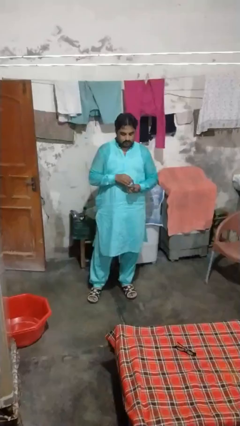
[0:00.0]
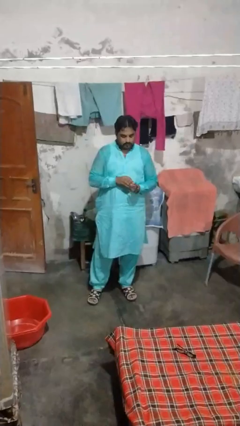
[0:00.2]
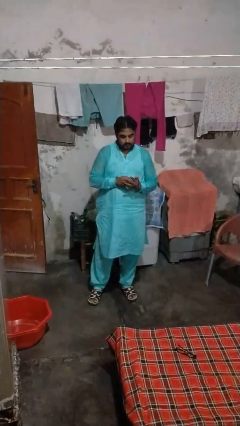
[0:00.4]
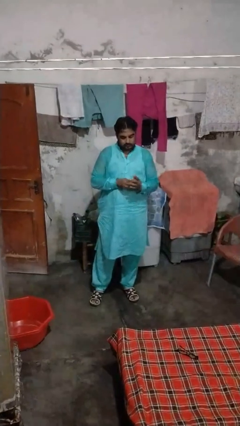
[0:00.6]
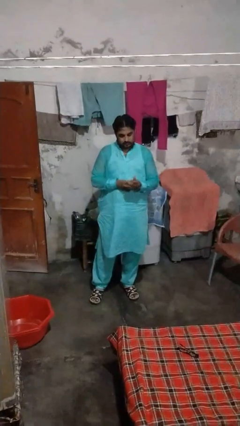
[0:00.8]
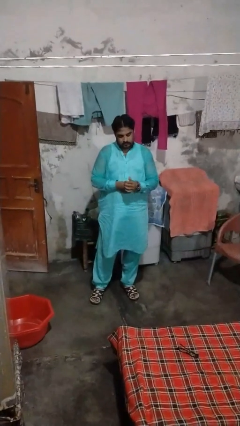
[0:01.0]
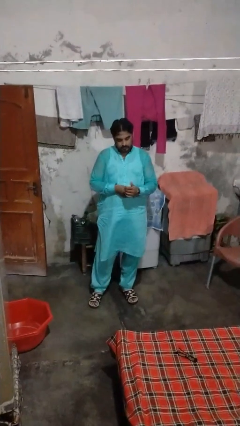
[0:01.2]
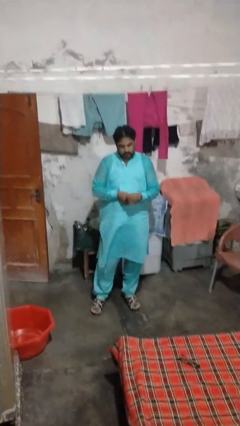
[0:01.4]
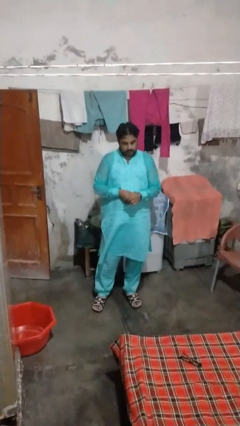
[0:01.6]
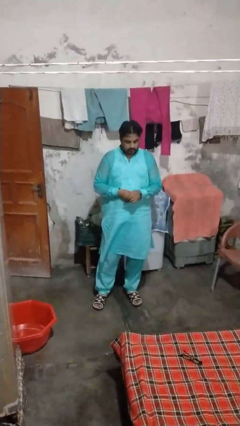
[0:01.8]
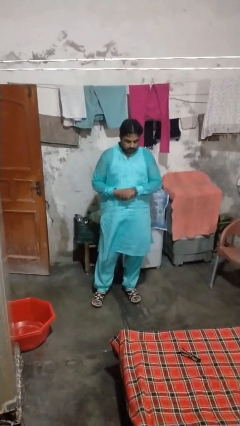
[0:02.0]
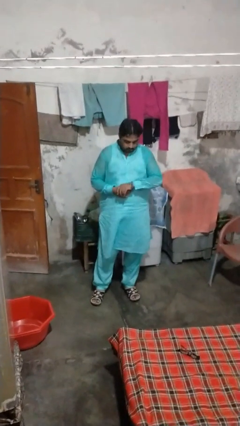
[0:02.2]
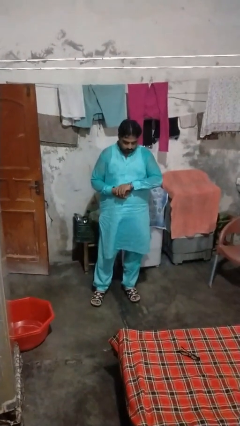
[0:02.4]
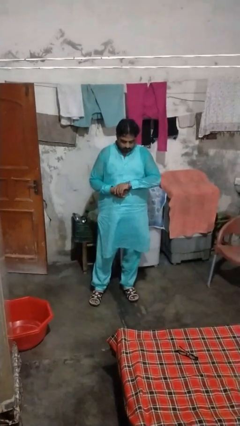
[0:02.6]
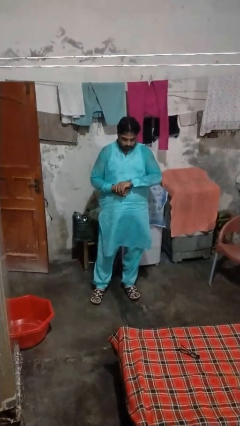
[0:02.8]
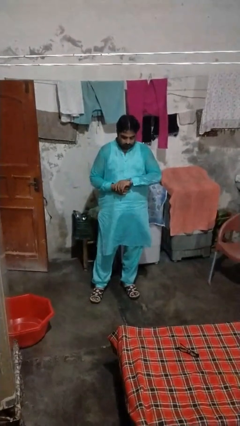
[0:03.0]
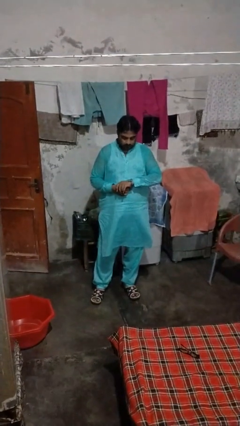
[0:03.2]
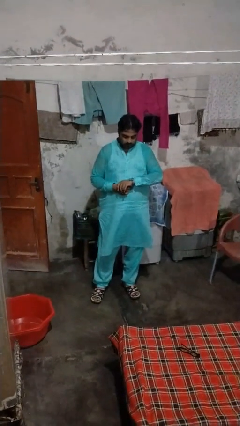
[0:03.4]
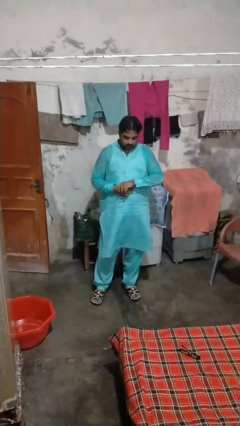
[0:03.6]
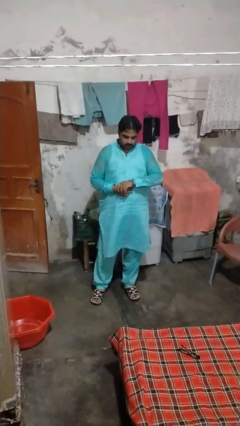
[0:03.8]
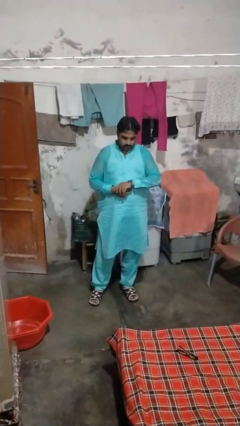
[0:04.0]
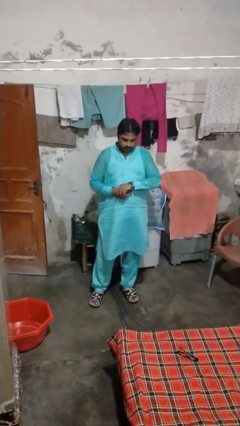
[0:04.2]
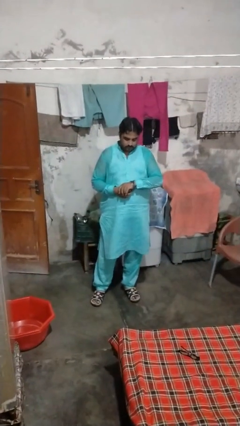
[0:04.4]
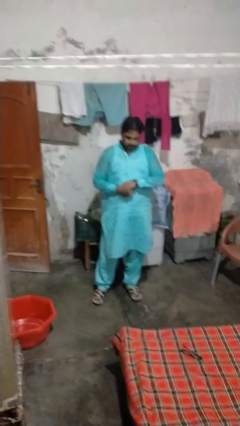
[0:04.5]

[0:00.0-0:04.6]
person puts on wristwatch

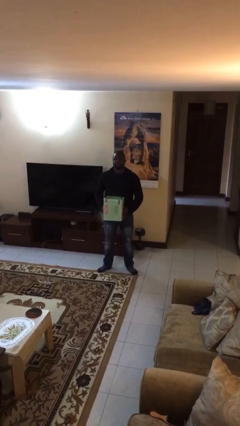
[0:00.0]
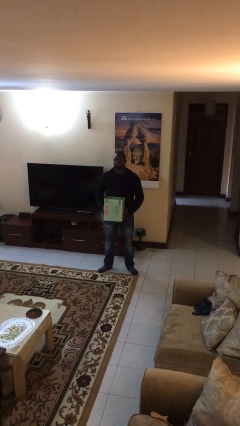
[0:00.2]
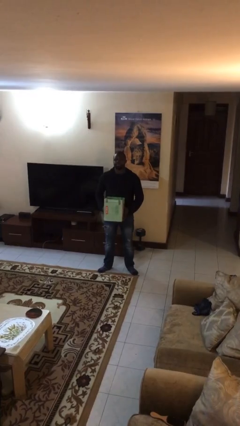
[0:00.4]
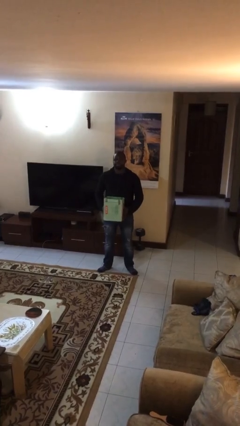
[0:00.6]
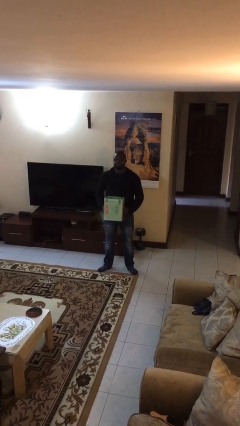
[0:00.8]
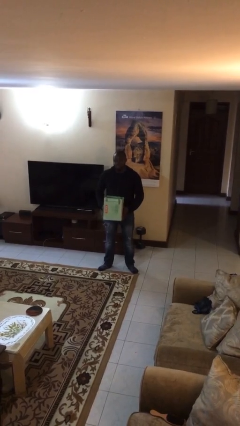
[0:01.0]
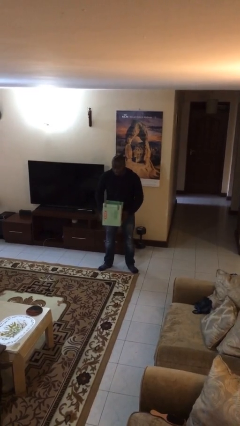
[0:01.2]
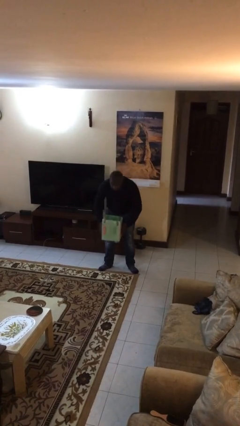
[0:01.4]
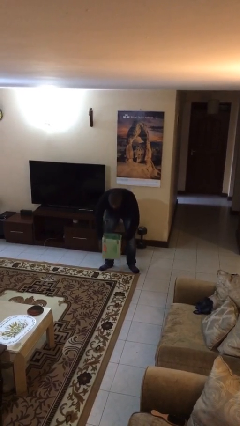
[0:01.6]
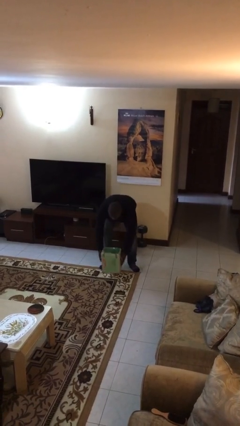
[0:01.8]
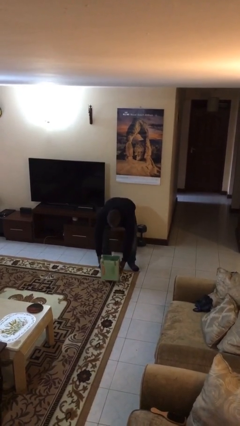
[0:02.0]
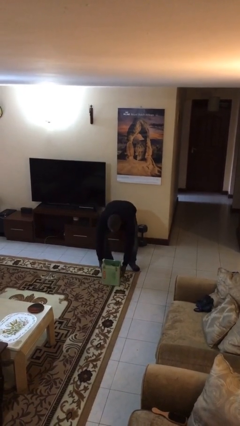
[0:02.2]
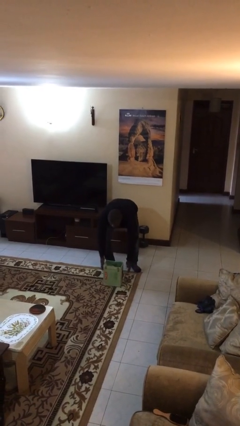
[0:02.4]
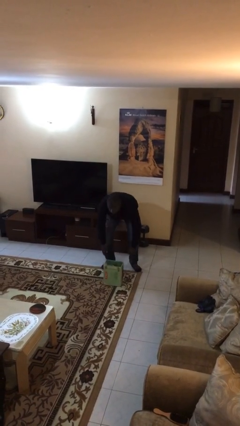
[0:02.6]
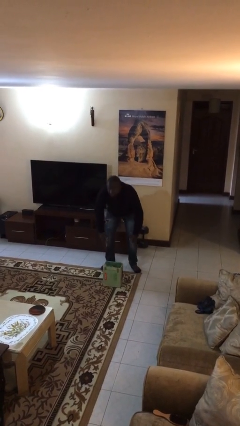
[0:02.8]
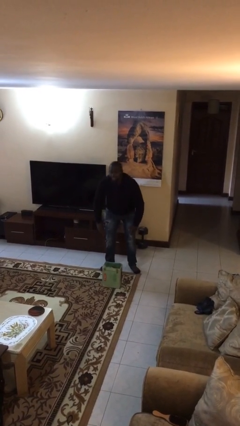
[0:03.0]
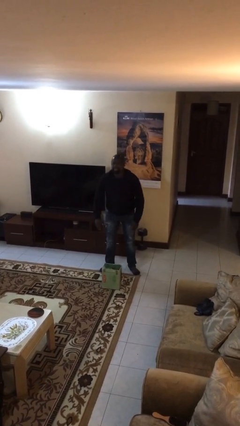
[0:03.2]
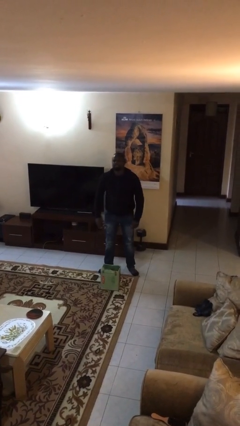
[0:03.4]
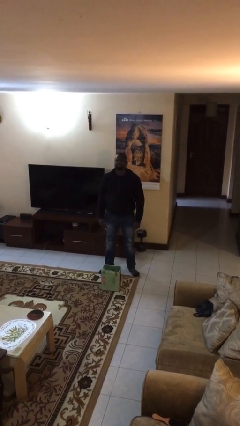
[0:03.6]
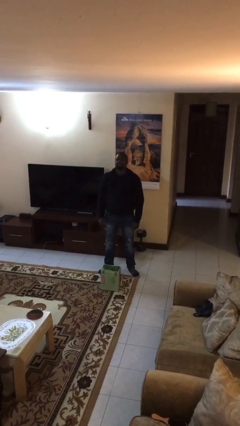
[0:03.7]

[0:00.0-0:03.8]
person puts down object on floor

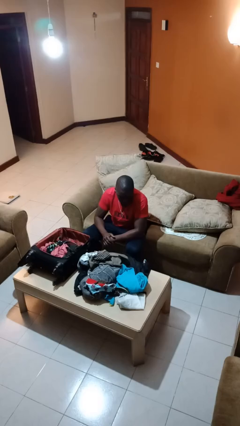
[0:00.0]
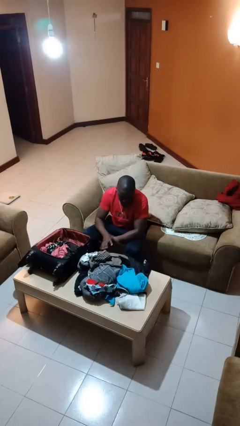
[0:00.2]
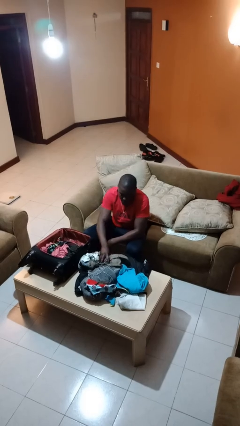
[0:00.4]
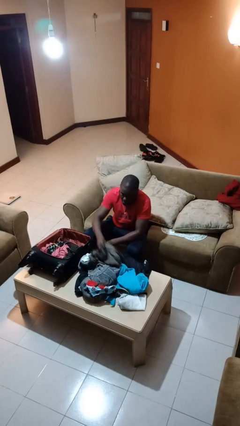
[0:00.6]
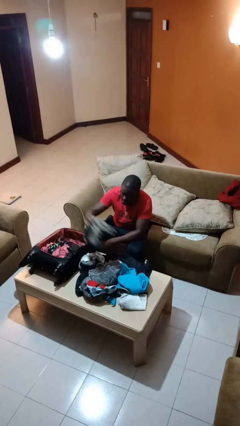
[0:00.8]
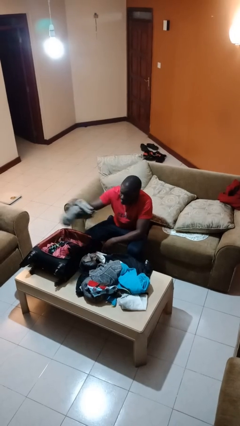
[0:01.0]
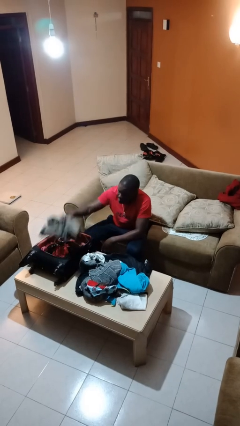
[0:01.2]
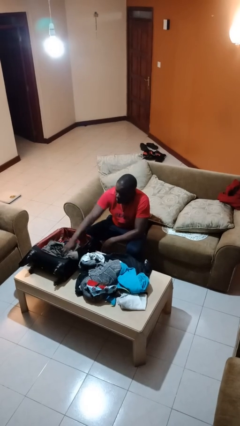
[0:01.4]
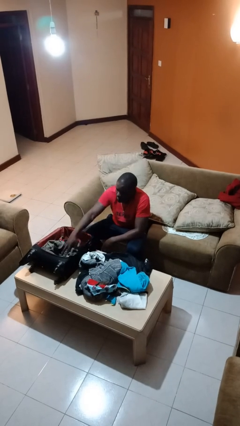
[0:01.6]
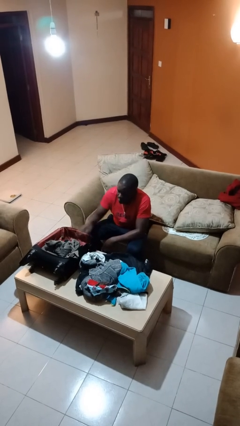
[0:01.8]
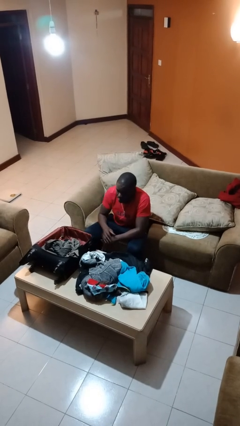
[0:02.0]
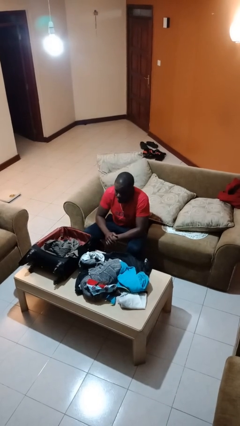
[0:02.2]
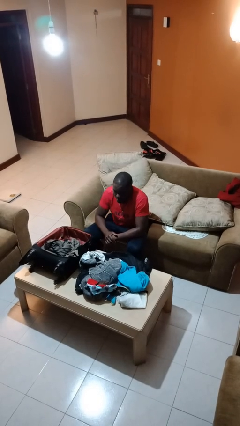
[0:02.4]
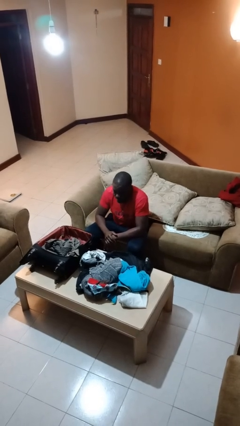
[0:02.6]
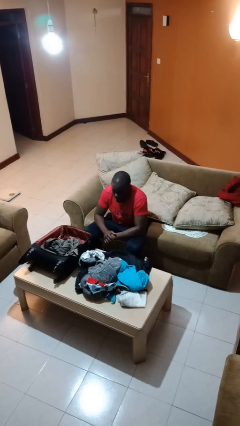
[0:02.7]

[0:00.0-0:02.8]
person loads clothes into suitcase

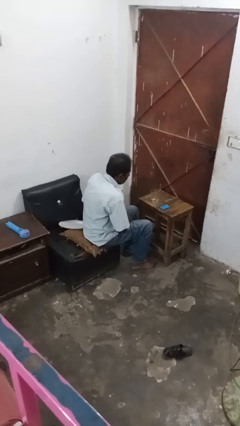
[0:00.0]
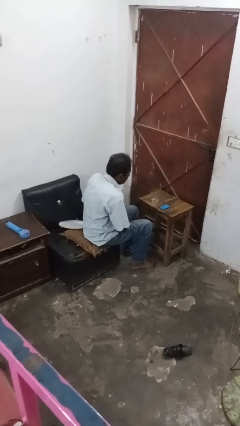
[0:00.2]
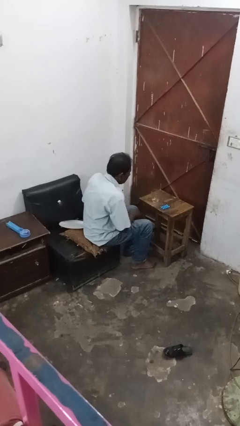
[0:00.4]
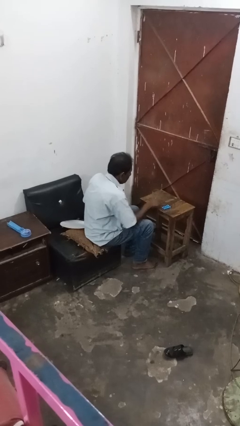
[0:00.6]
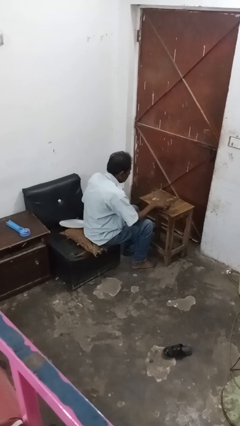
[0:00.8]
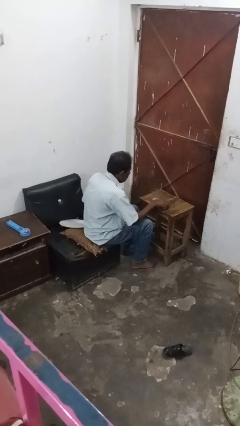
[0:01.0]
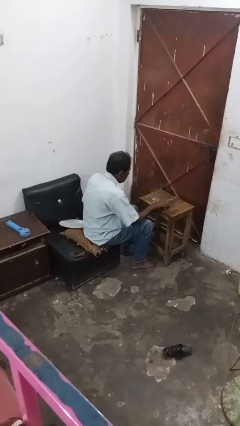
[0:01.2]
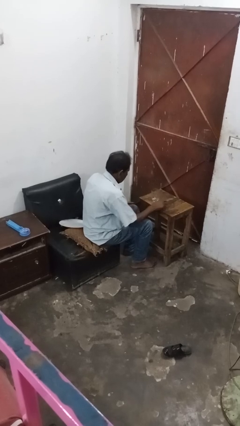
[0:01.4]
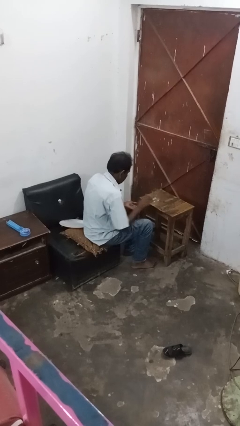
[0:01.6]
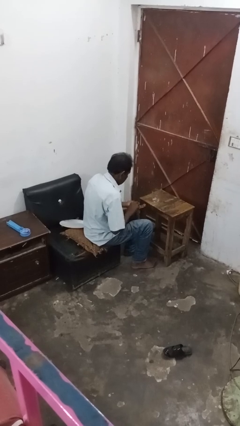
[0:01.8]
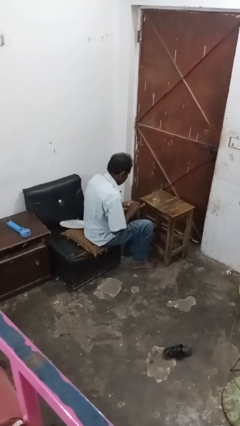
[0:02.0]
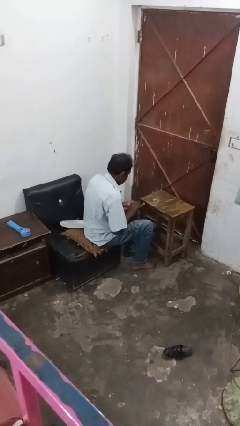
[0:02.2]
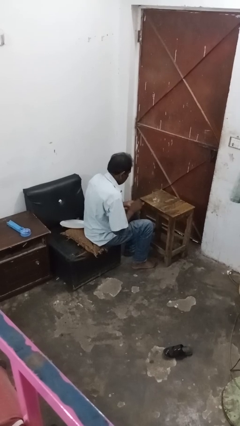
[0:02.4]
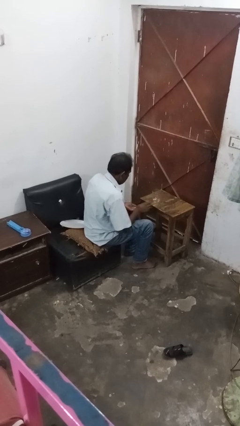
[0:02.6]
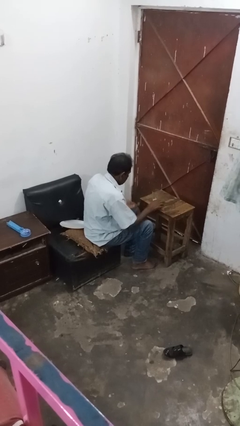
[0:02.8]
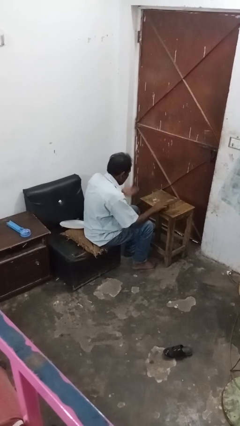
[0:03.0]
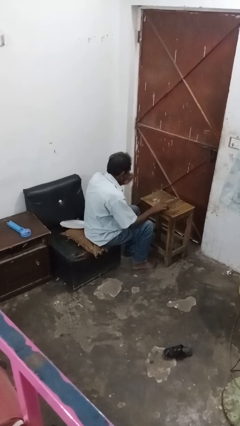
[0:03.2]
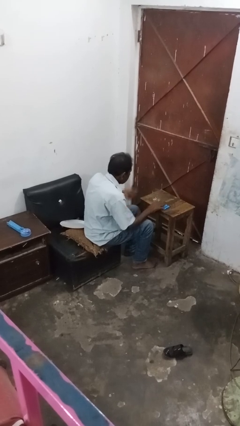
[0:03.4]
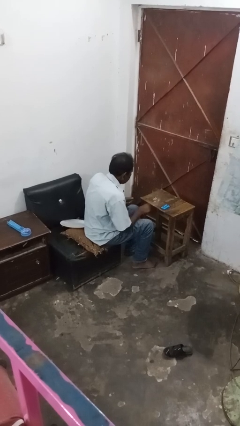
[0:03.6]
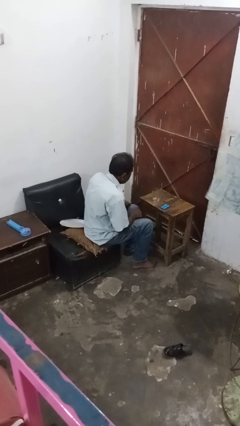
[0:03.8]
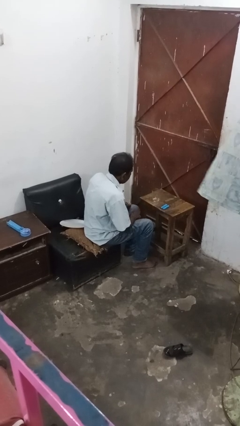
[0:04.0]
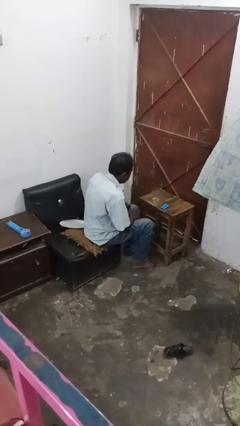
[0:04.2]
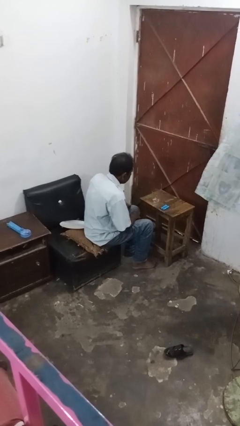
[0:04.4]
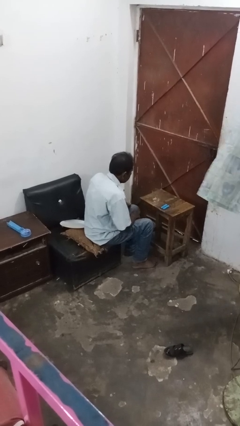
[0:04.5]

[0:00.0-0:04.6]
person takes medicine pills

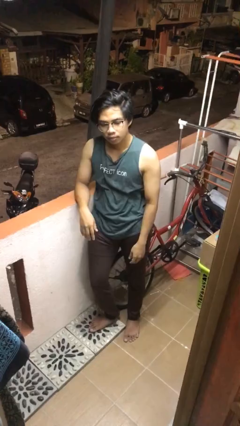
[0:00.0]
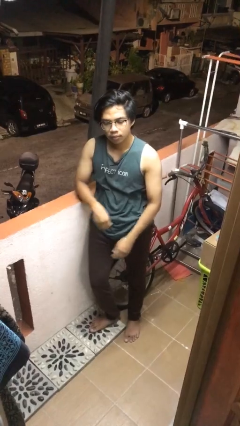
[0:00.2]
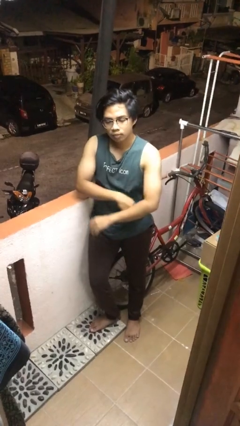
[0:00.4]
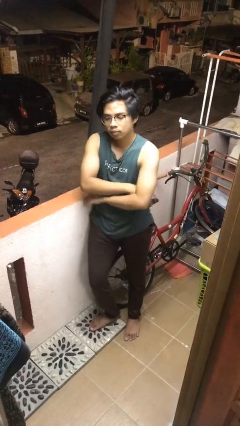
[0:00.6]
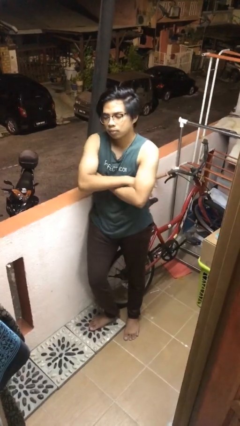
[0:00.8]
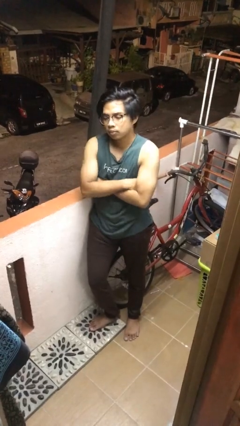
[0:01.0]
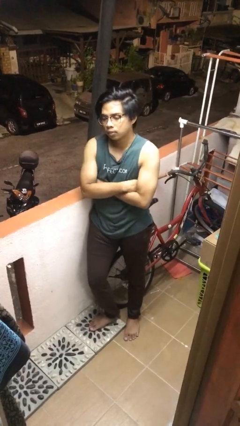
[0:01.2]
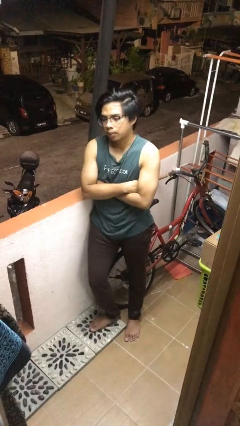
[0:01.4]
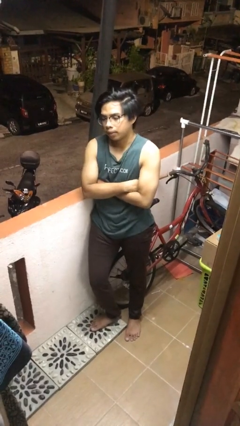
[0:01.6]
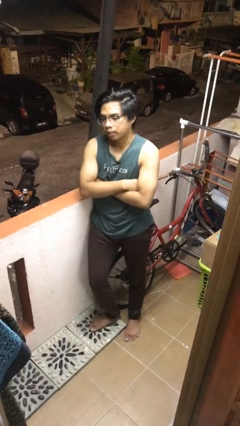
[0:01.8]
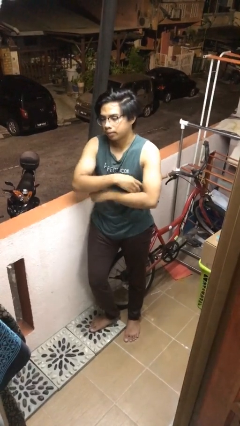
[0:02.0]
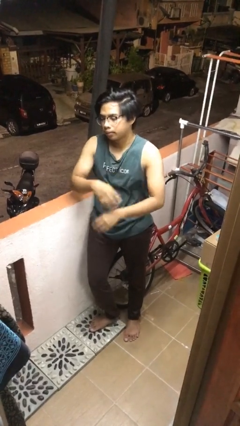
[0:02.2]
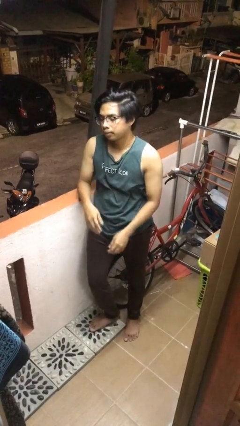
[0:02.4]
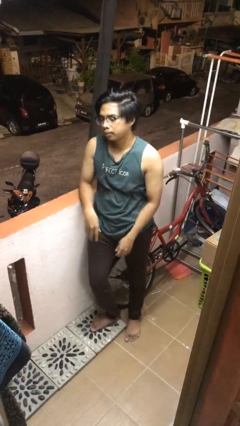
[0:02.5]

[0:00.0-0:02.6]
person crosses arms
